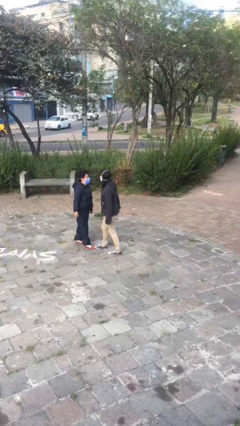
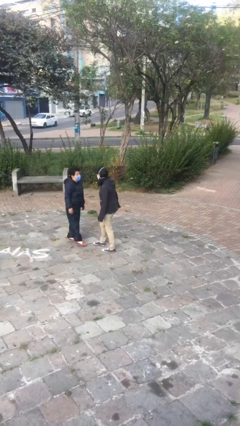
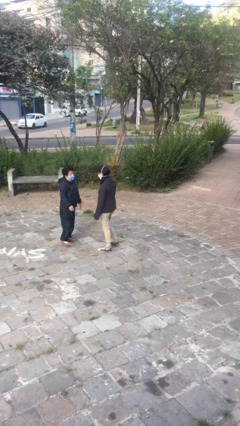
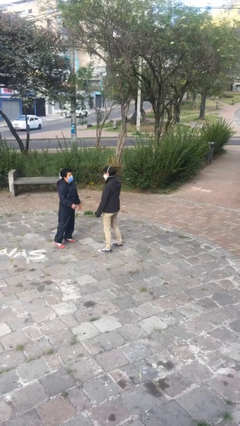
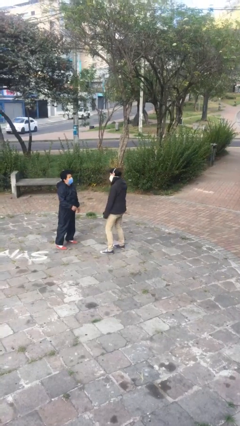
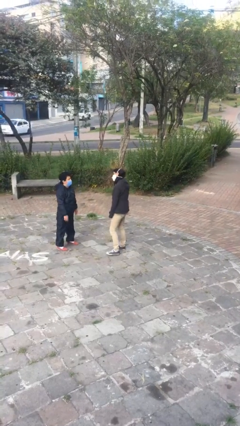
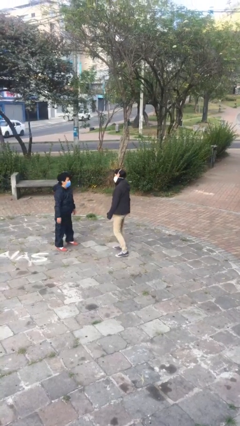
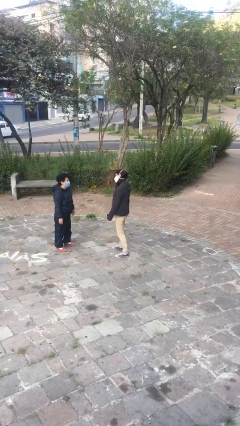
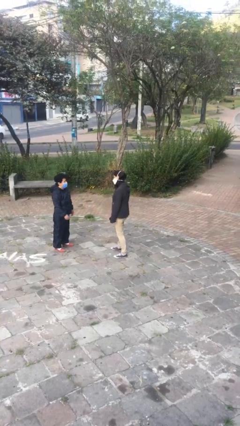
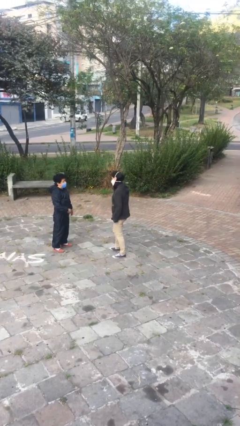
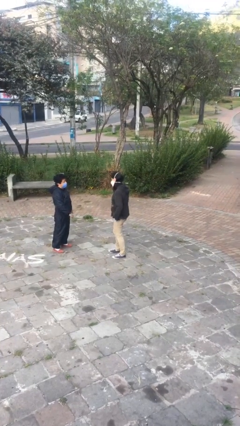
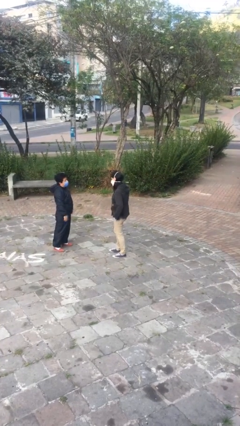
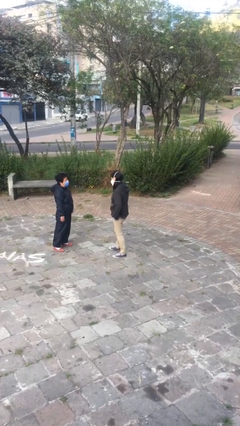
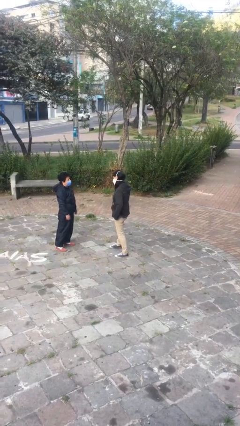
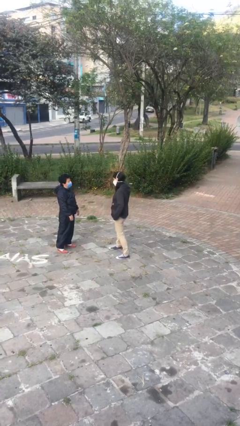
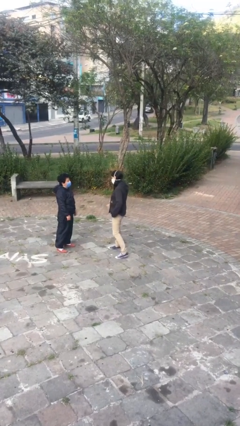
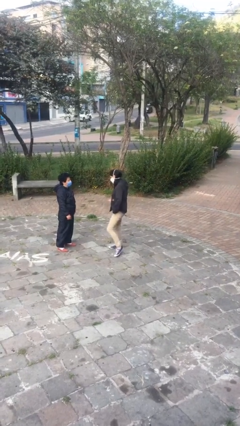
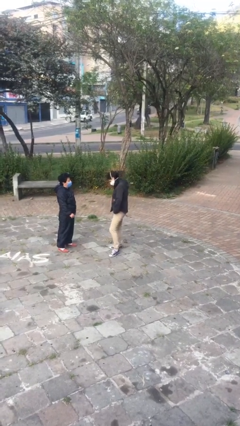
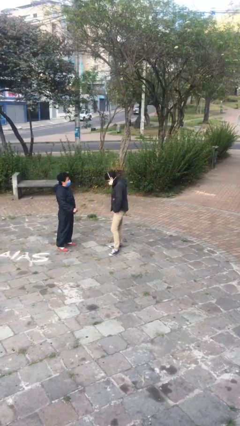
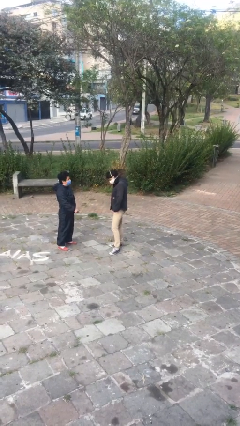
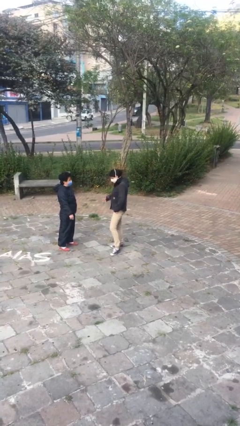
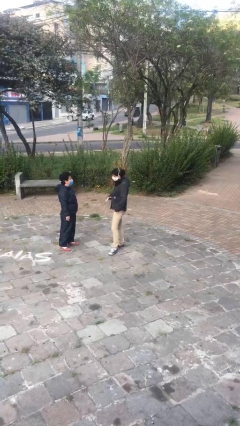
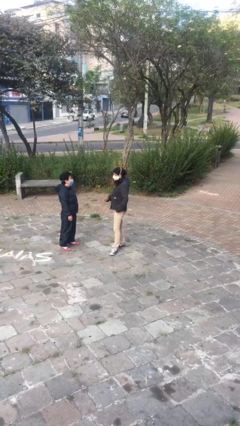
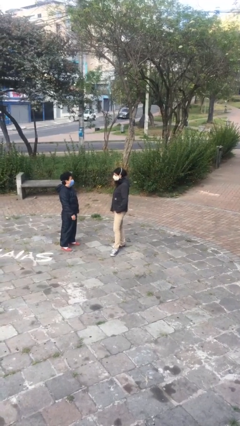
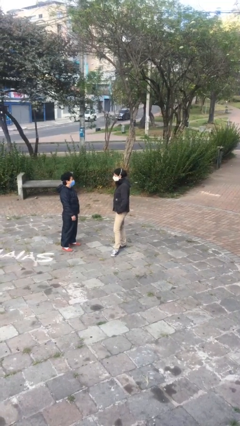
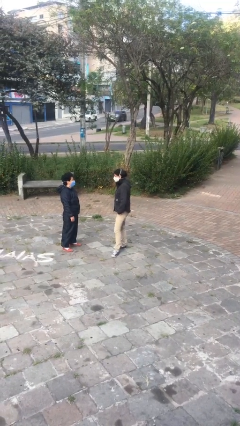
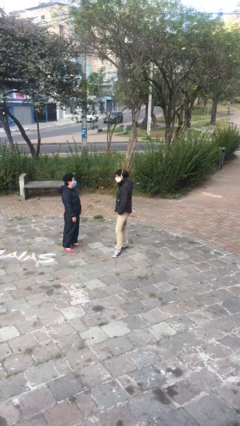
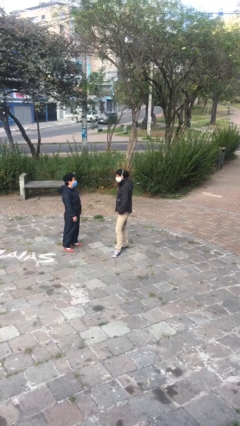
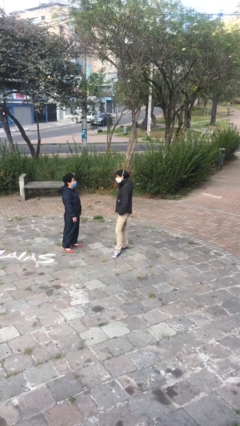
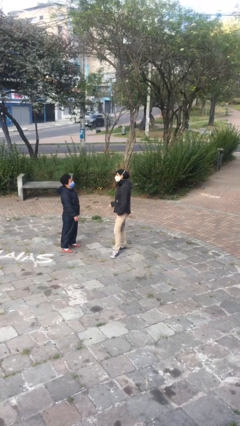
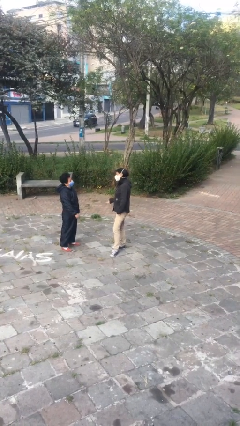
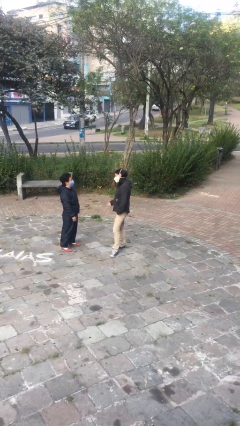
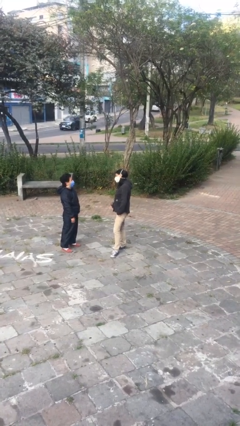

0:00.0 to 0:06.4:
person talks to person

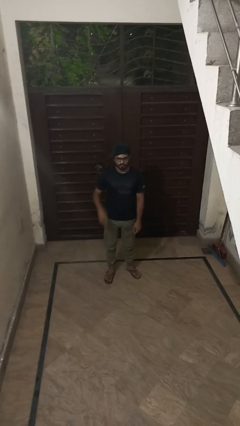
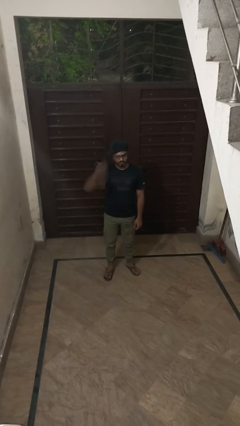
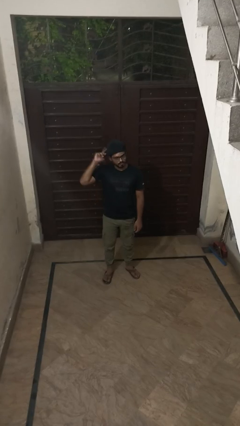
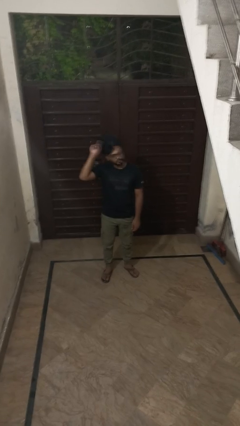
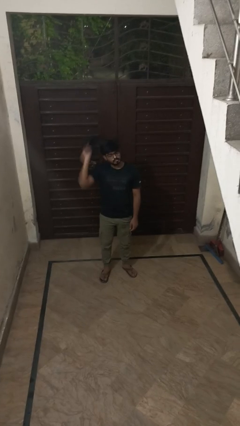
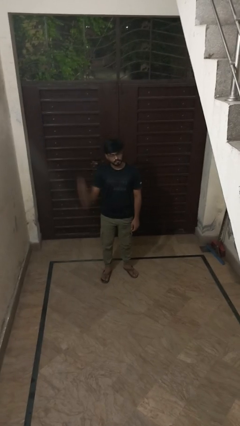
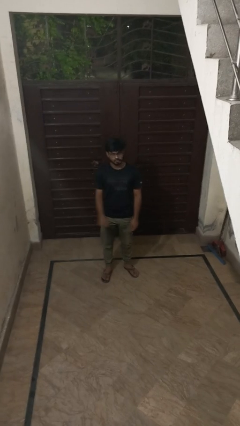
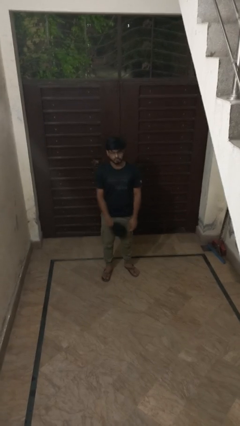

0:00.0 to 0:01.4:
person takes off hat

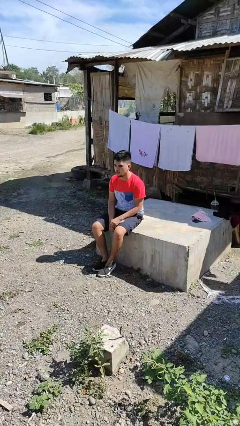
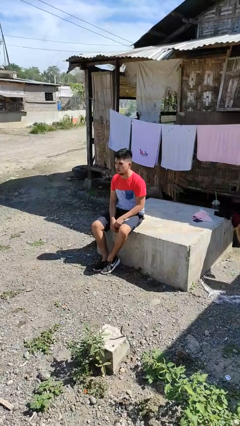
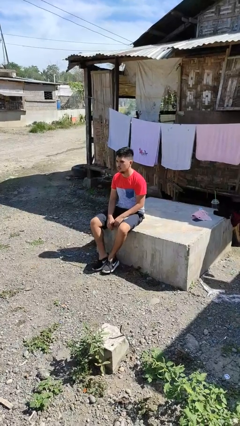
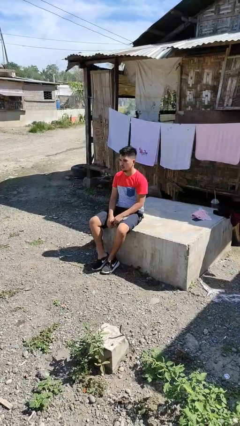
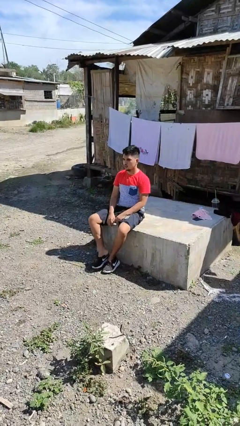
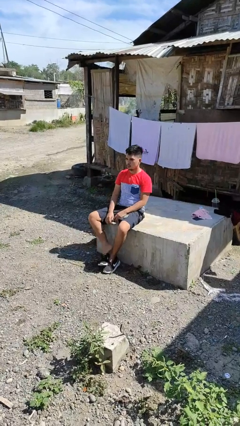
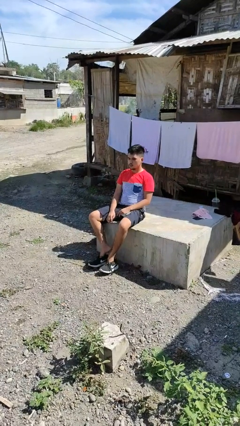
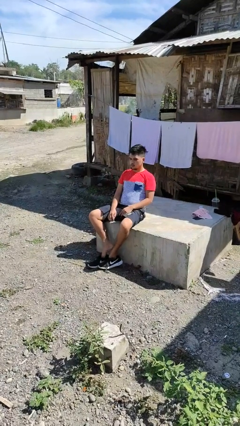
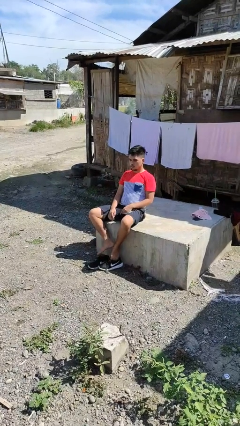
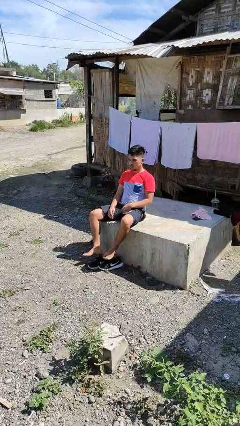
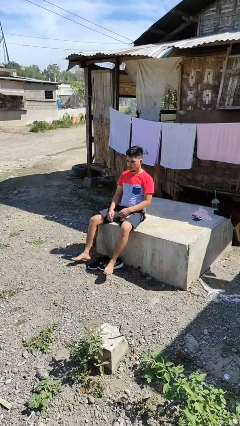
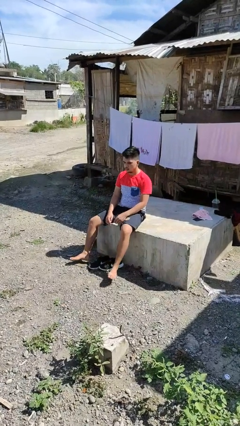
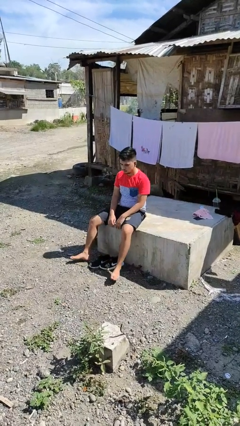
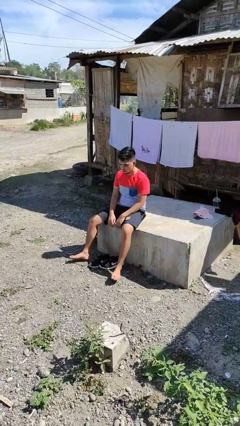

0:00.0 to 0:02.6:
person takes off shoes

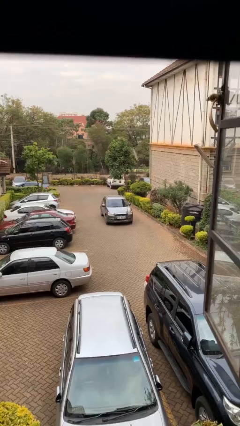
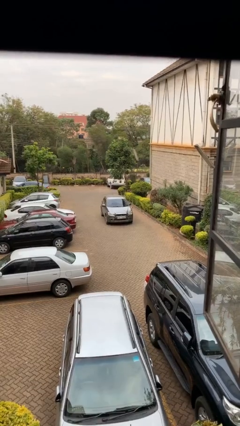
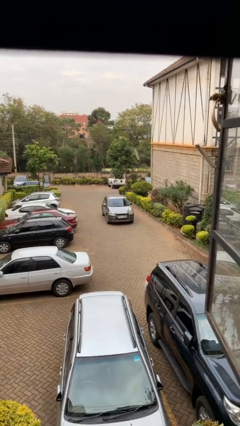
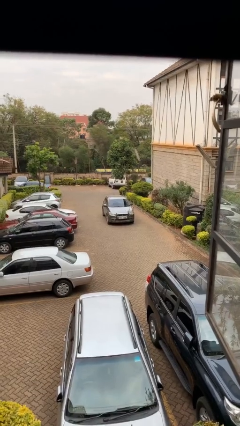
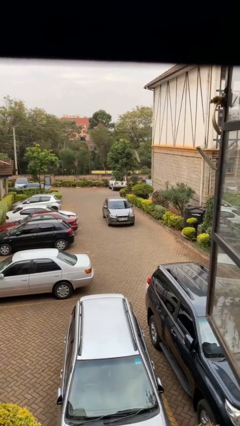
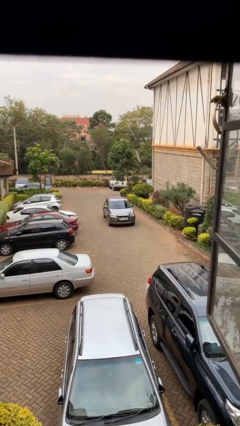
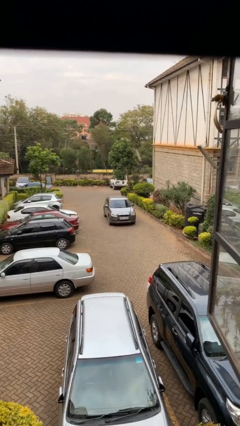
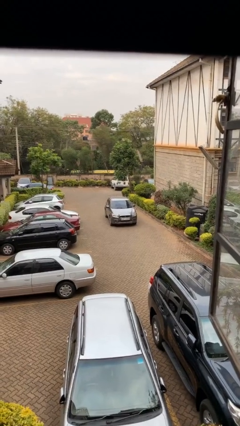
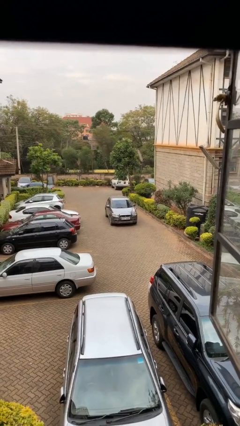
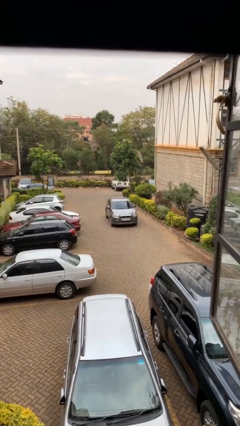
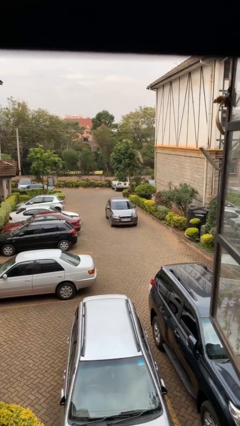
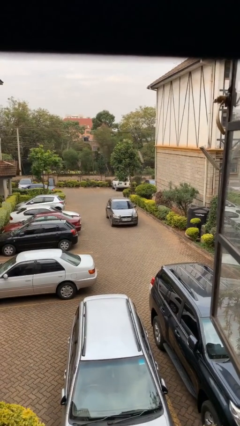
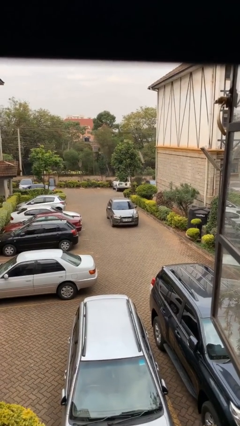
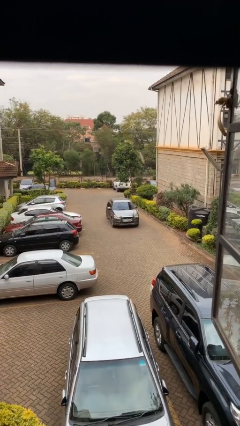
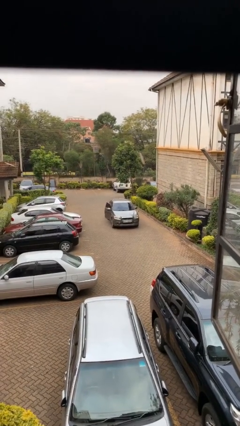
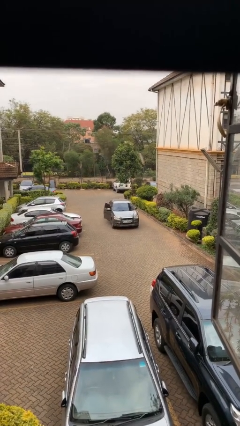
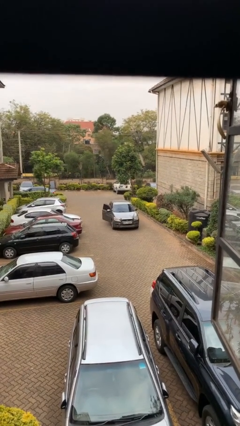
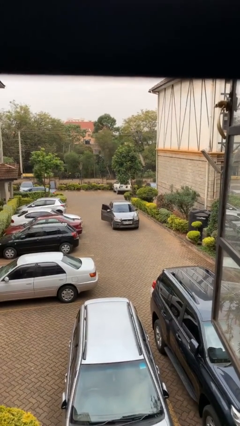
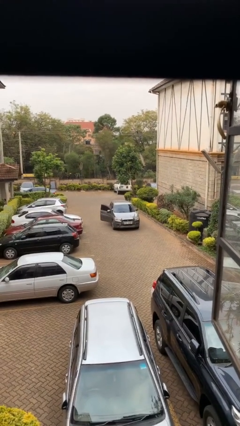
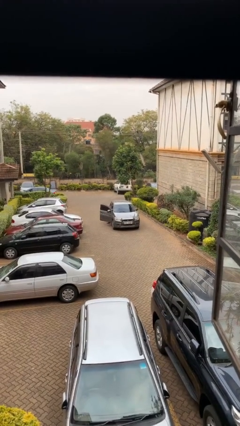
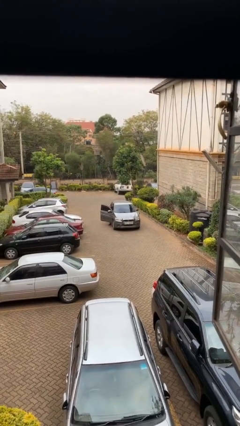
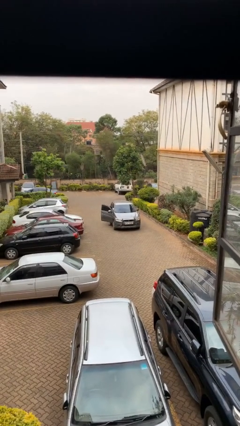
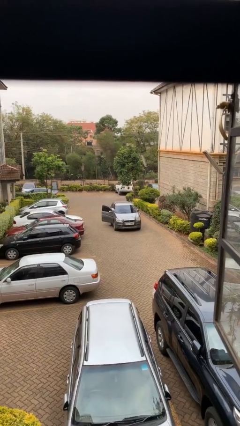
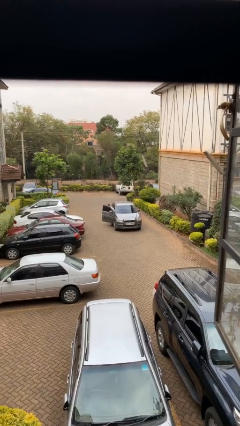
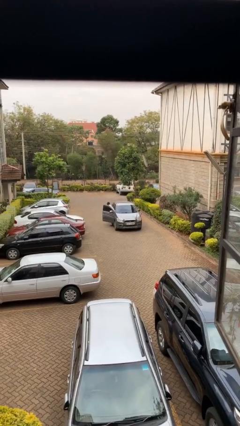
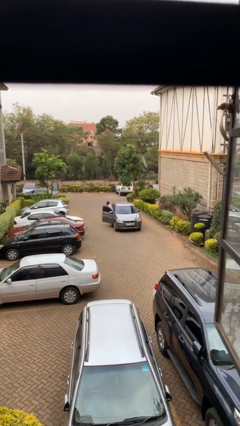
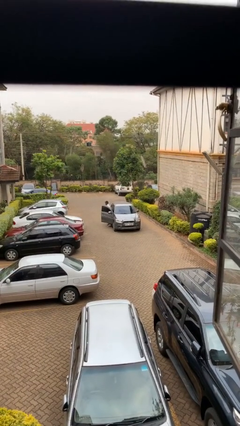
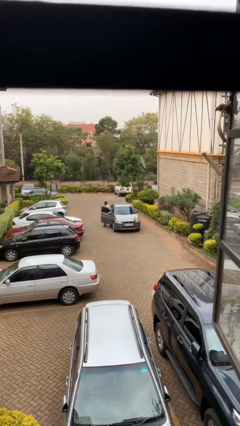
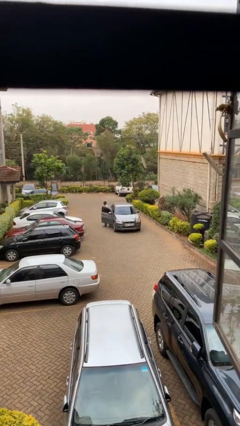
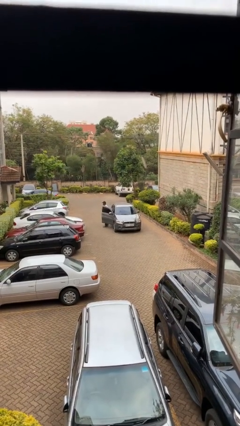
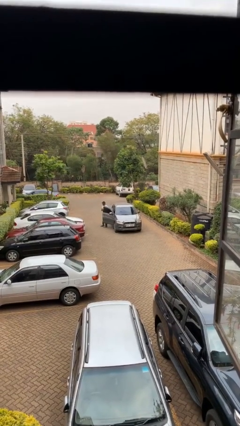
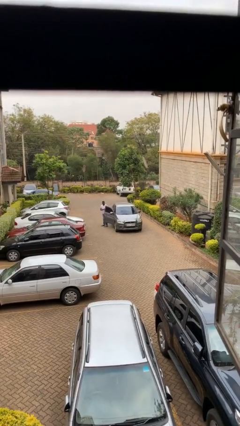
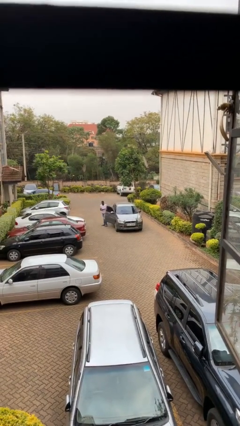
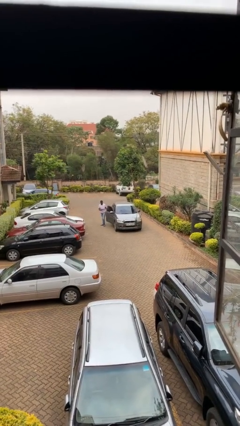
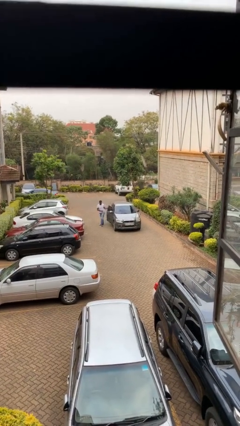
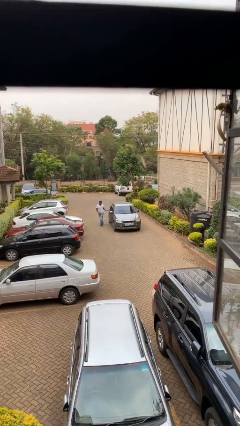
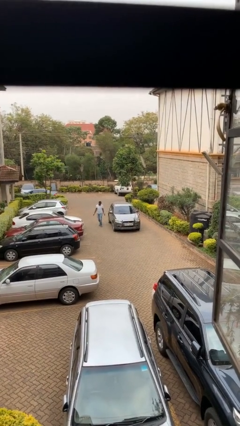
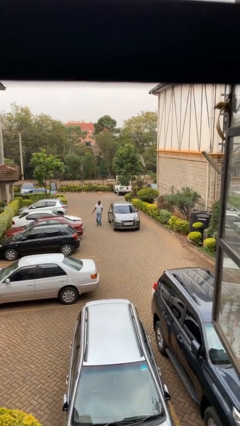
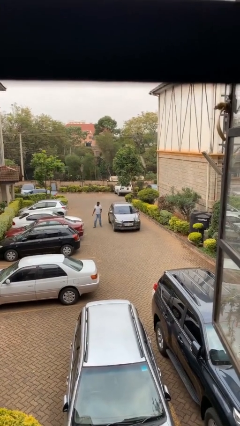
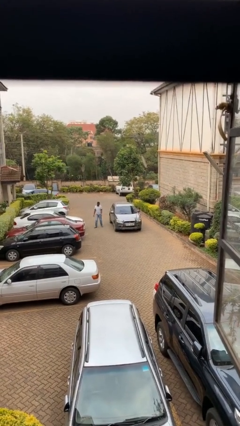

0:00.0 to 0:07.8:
car drops off person
